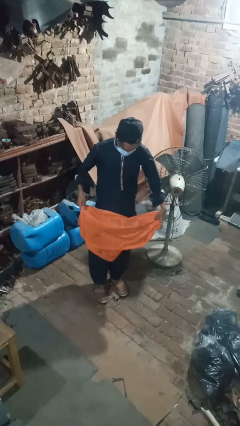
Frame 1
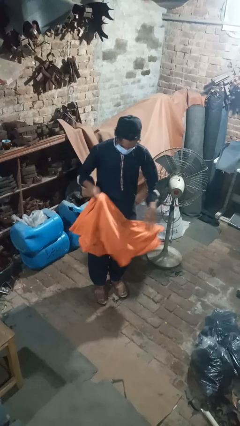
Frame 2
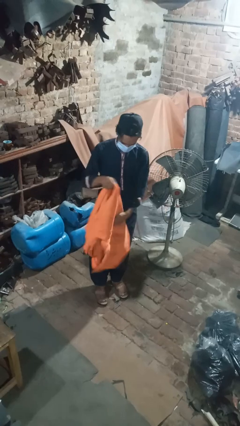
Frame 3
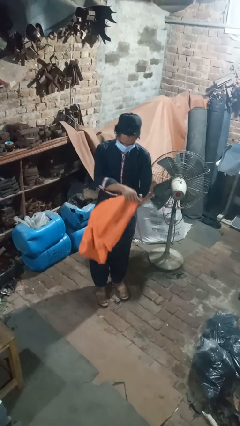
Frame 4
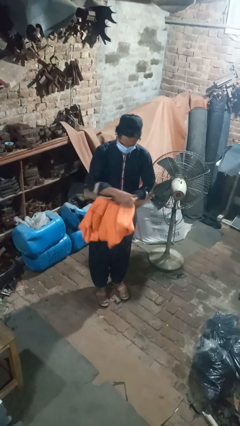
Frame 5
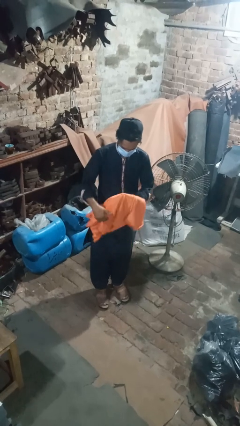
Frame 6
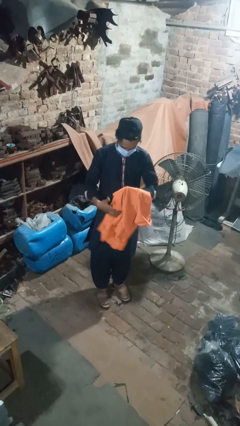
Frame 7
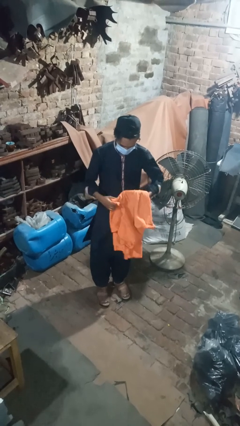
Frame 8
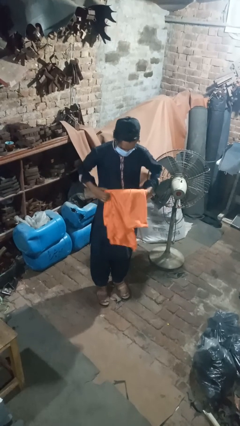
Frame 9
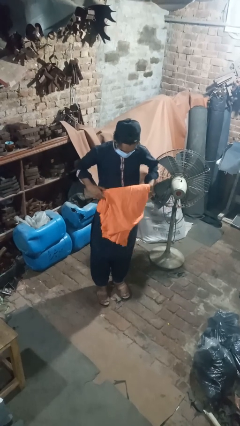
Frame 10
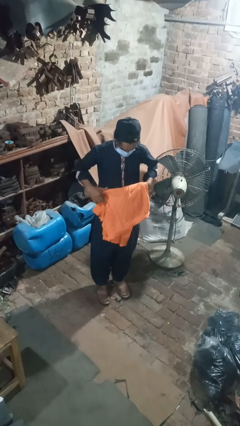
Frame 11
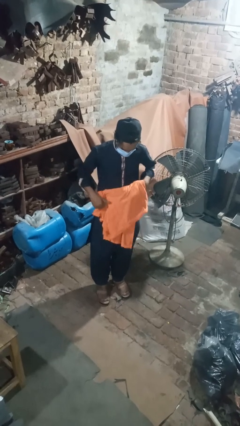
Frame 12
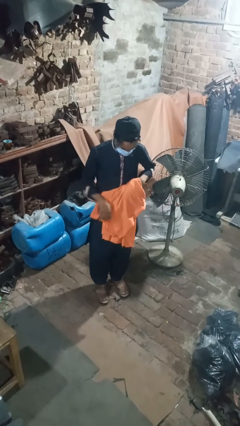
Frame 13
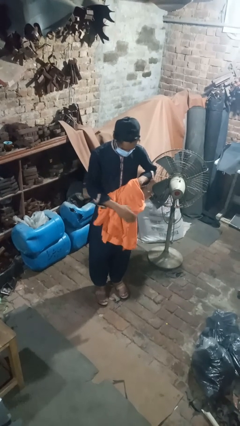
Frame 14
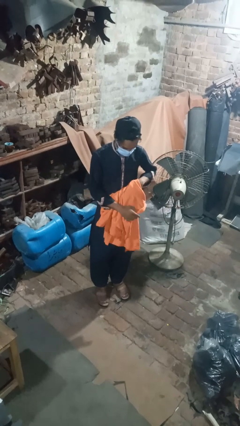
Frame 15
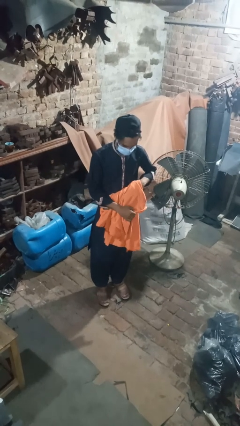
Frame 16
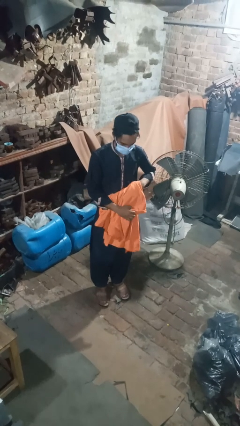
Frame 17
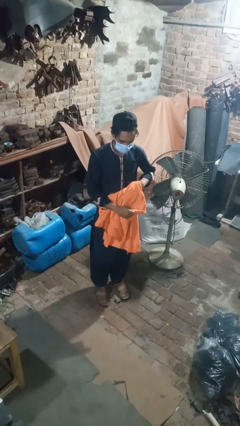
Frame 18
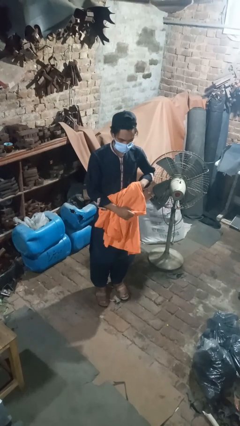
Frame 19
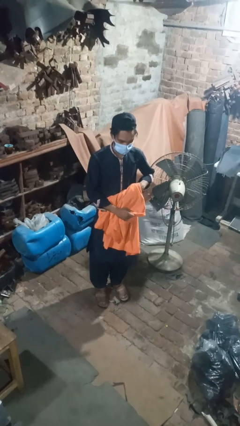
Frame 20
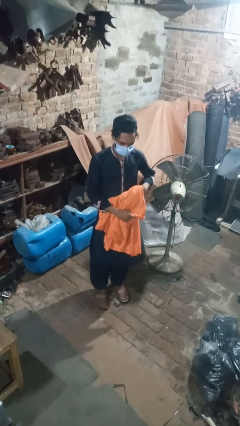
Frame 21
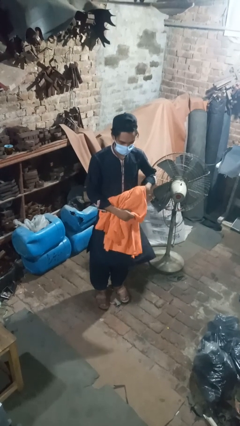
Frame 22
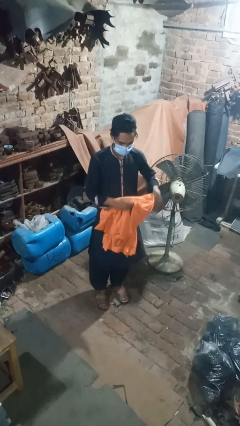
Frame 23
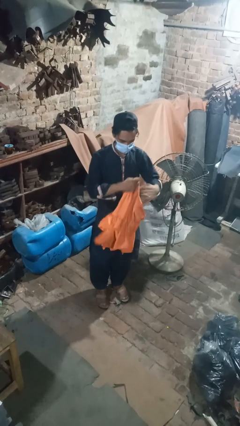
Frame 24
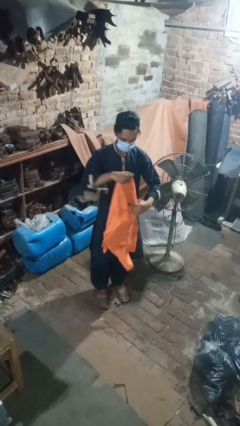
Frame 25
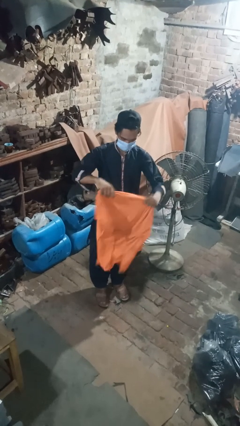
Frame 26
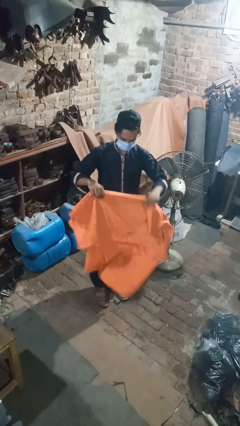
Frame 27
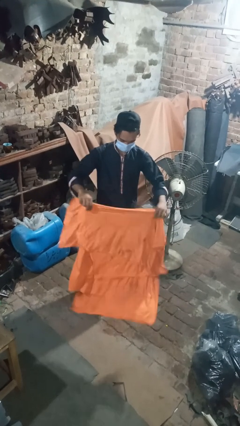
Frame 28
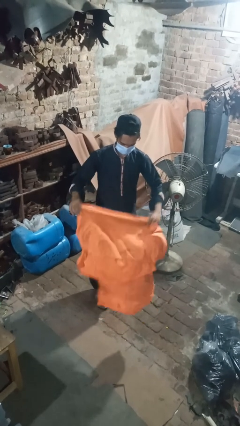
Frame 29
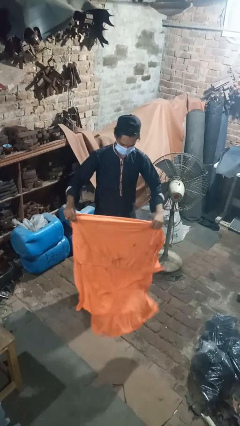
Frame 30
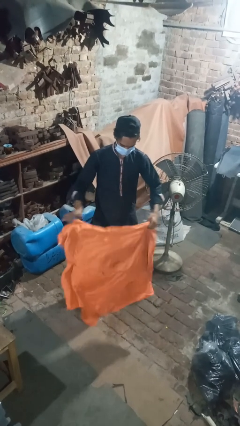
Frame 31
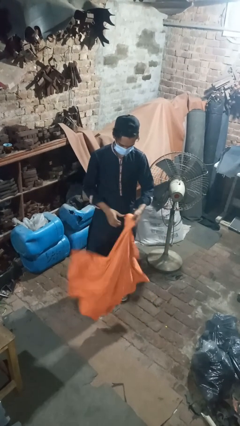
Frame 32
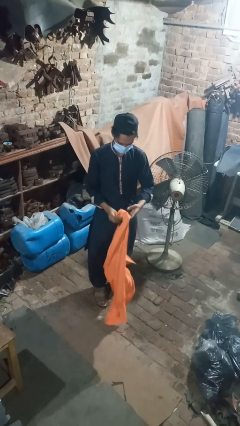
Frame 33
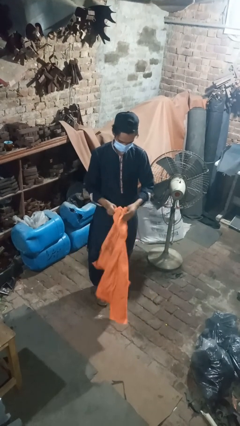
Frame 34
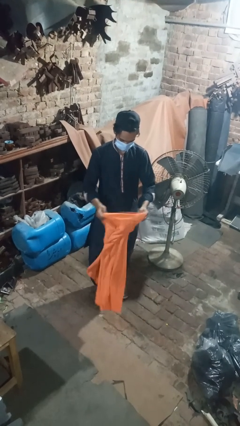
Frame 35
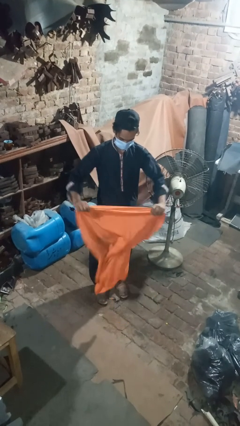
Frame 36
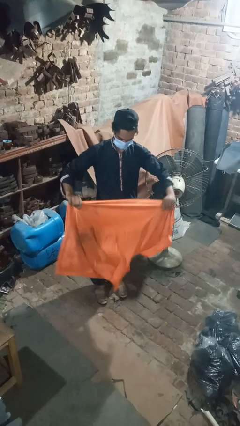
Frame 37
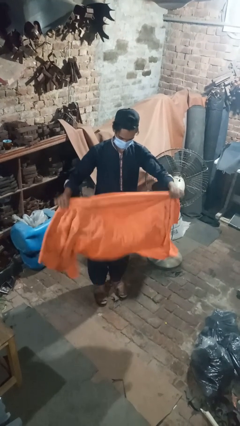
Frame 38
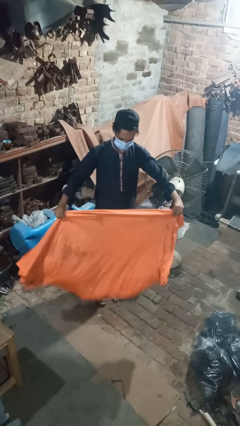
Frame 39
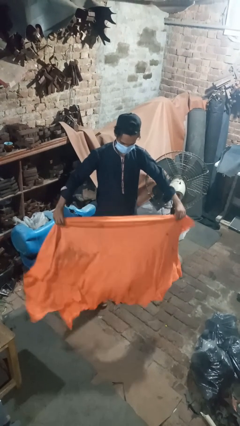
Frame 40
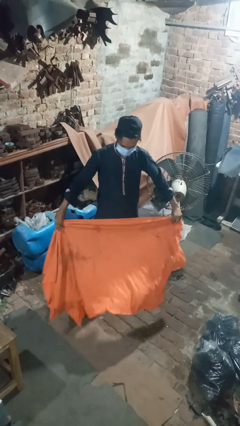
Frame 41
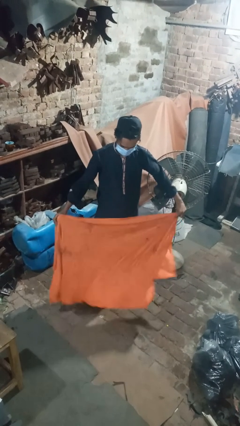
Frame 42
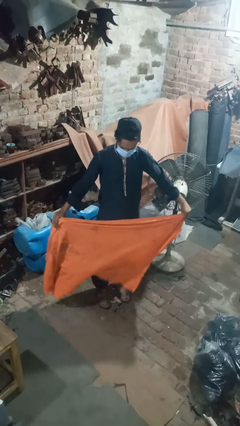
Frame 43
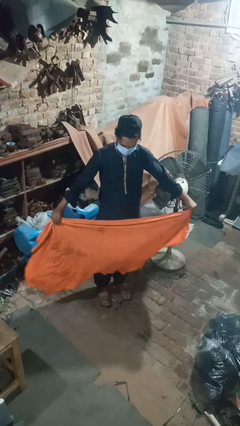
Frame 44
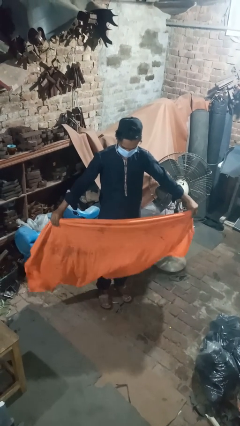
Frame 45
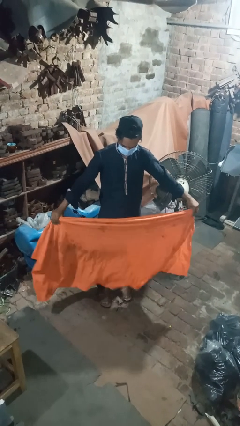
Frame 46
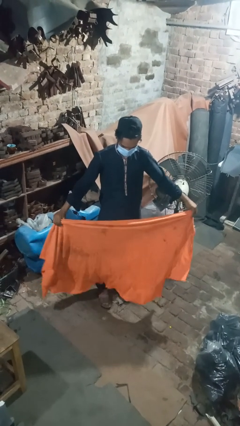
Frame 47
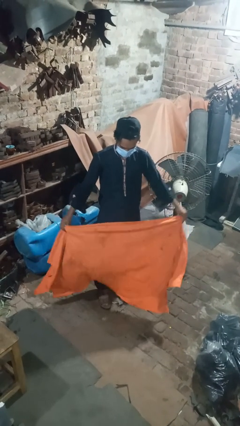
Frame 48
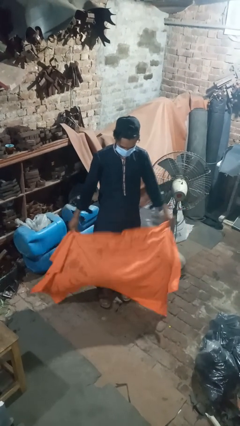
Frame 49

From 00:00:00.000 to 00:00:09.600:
person unfolds blanket

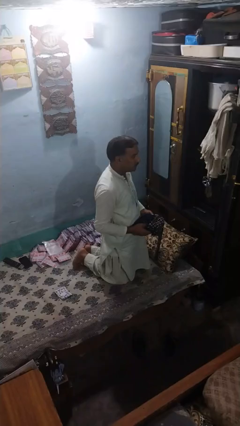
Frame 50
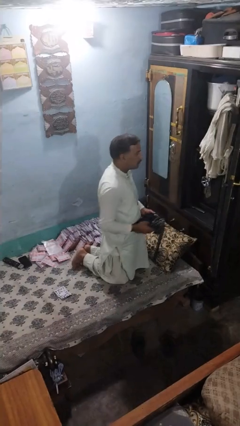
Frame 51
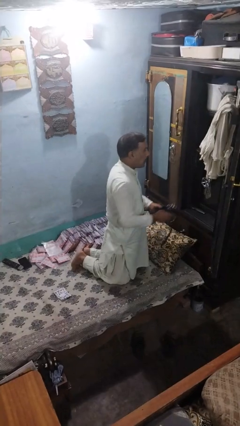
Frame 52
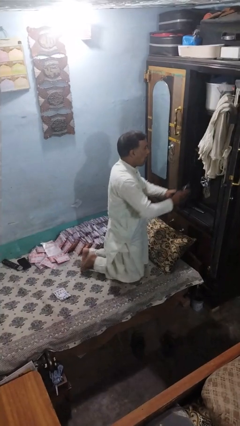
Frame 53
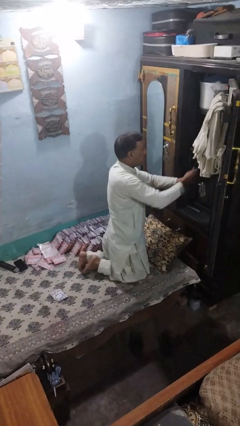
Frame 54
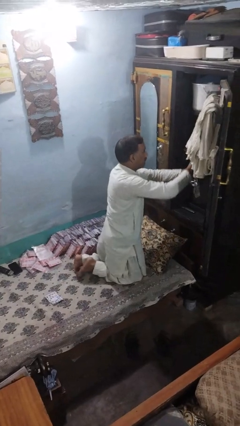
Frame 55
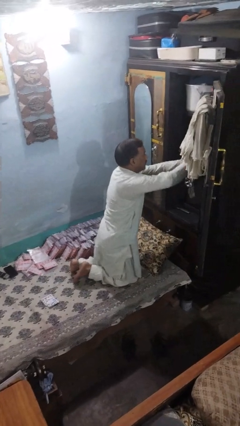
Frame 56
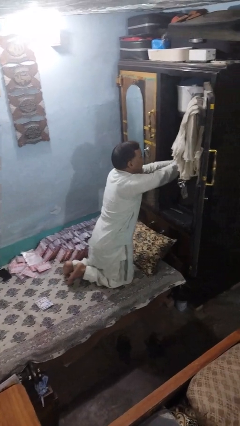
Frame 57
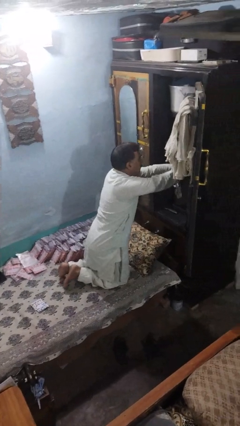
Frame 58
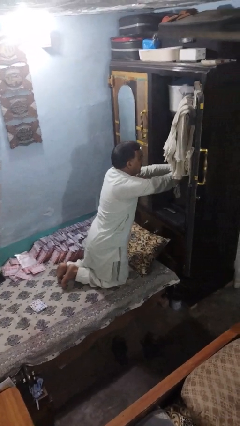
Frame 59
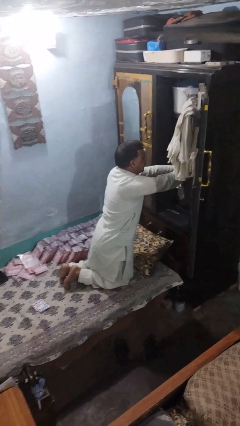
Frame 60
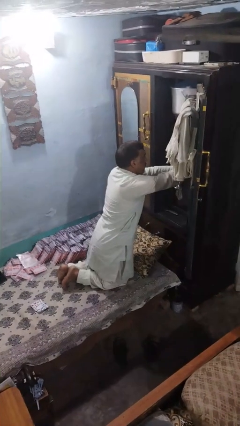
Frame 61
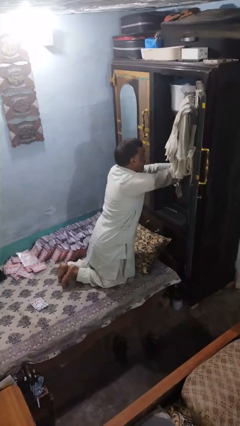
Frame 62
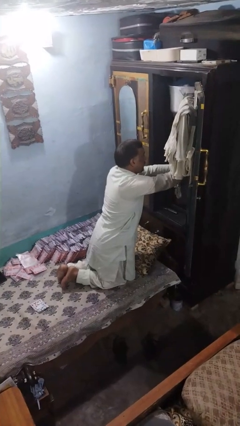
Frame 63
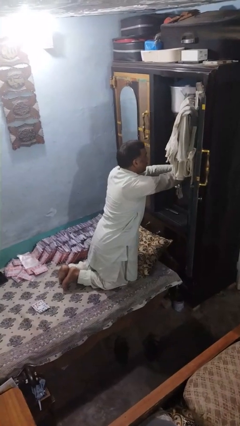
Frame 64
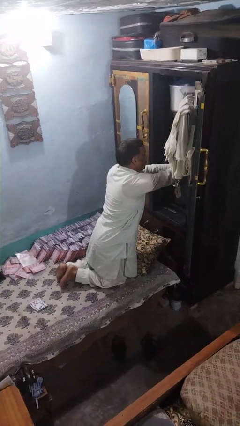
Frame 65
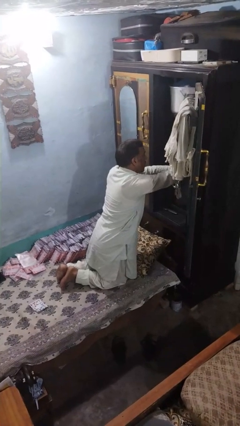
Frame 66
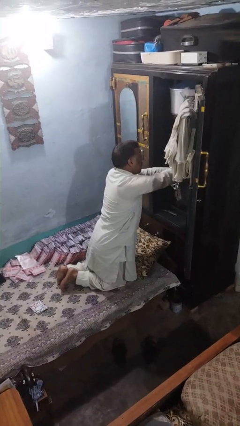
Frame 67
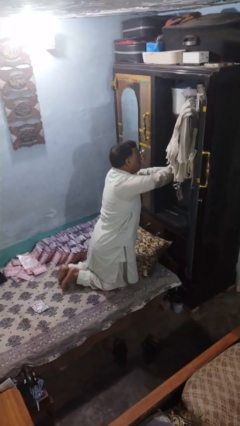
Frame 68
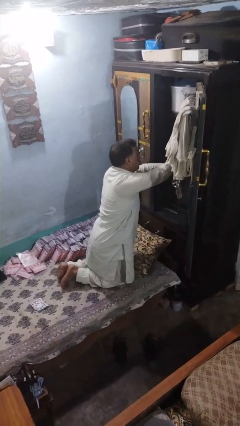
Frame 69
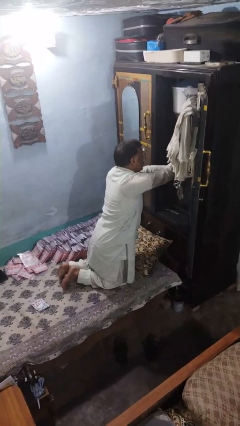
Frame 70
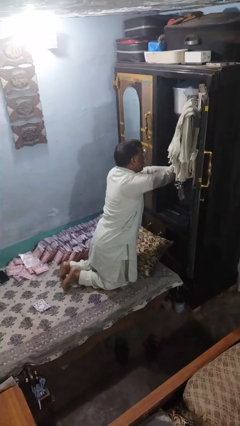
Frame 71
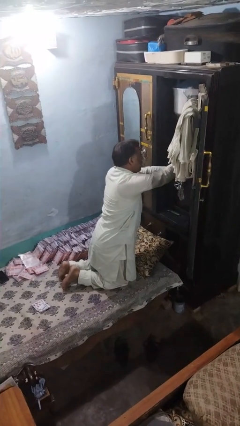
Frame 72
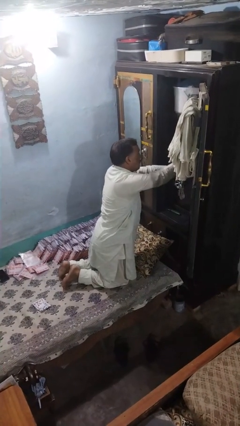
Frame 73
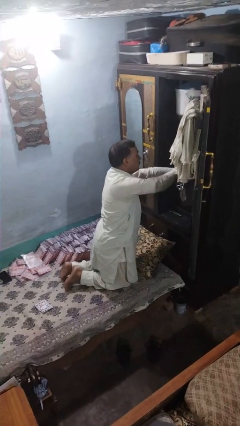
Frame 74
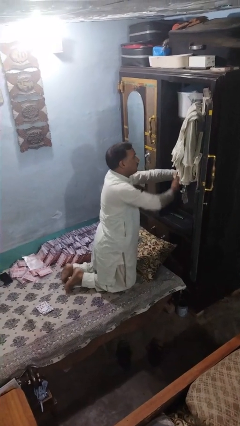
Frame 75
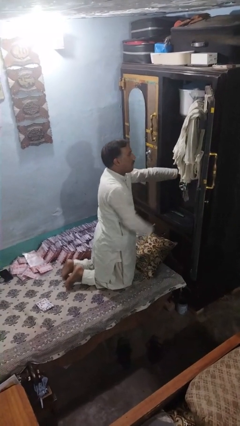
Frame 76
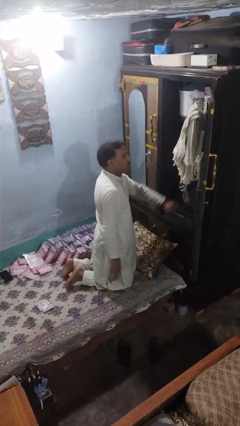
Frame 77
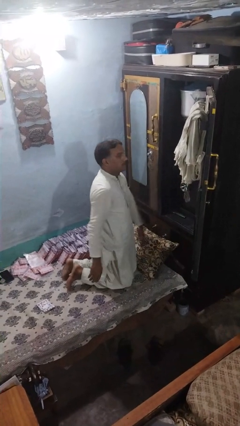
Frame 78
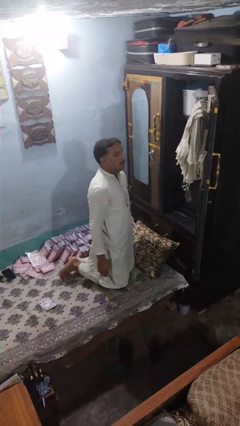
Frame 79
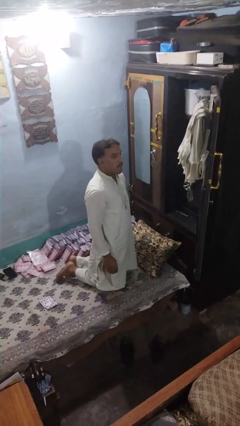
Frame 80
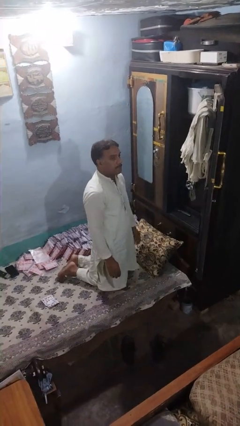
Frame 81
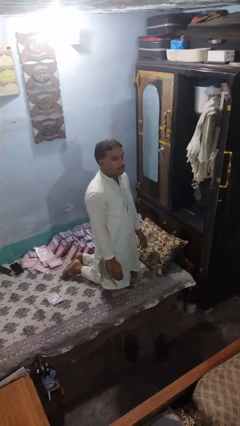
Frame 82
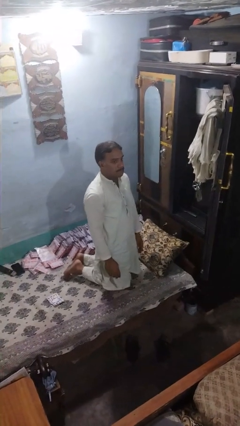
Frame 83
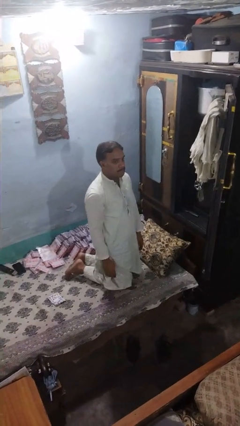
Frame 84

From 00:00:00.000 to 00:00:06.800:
person puts clothes into dresser

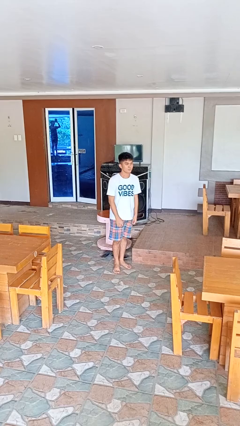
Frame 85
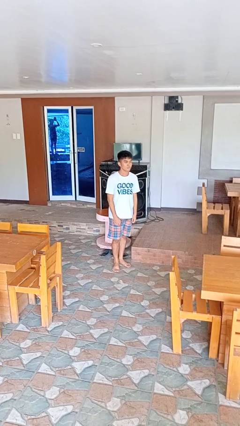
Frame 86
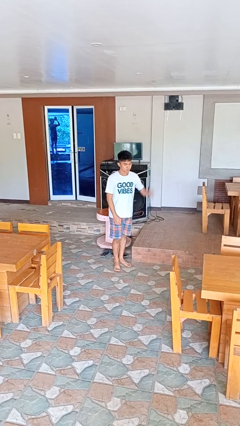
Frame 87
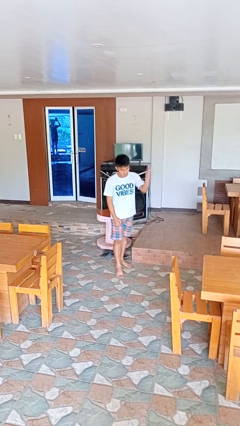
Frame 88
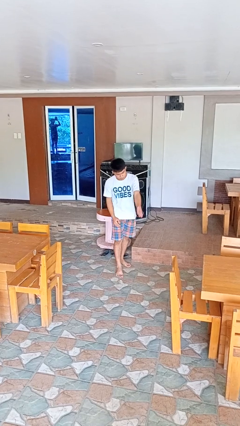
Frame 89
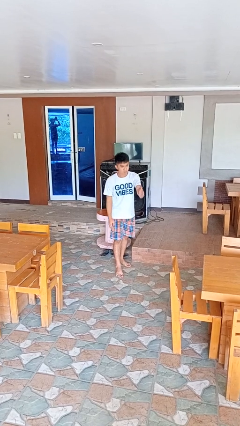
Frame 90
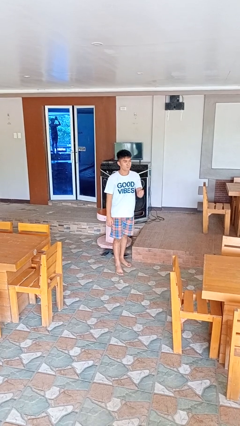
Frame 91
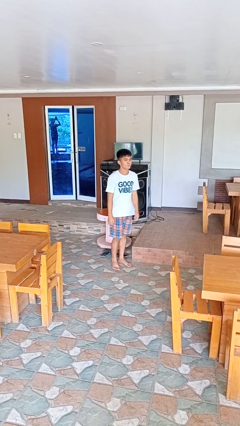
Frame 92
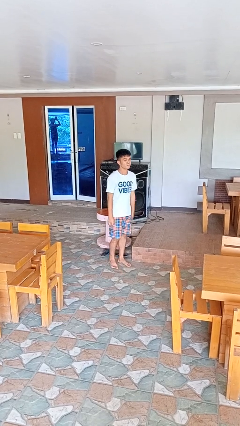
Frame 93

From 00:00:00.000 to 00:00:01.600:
person karate chop

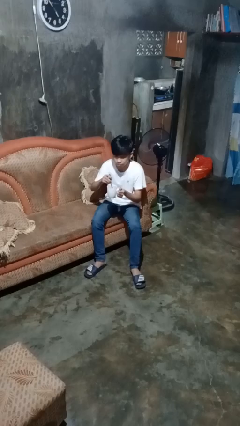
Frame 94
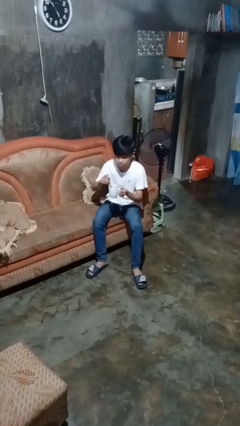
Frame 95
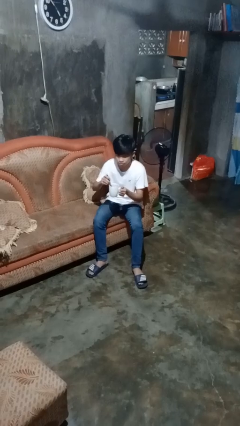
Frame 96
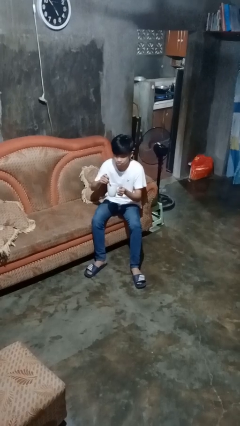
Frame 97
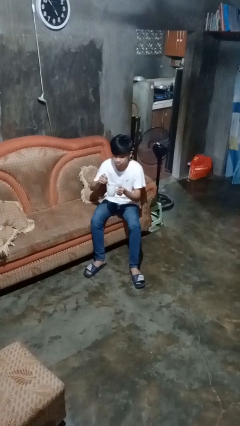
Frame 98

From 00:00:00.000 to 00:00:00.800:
person stirs mug
